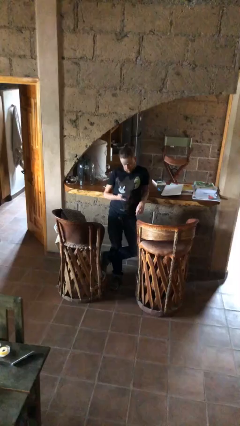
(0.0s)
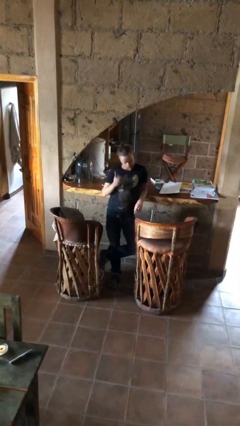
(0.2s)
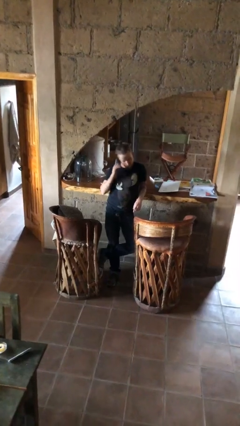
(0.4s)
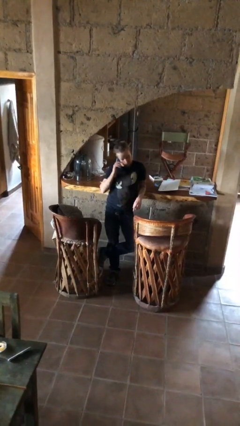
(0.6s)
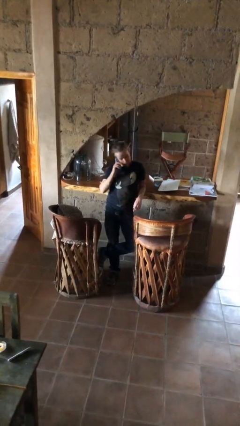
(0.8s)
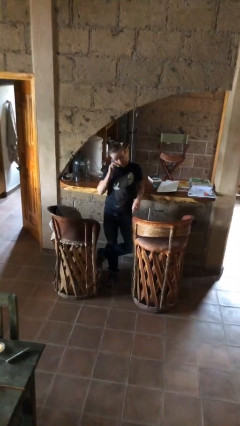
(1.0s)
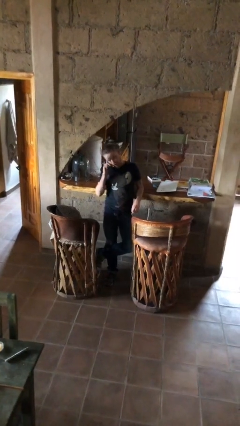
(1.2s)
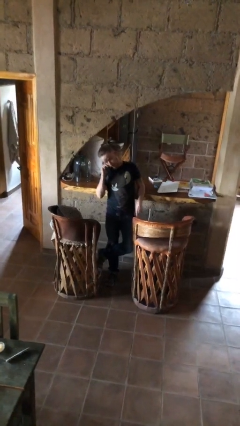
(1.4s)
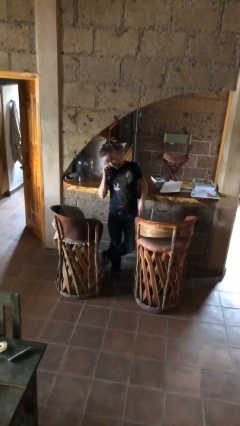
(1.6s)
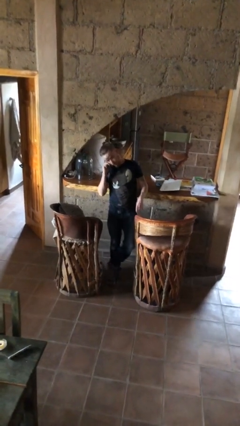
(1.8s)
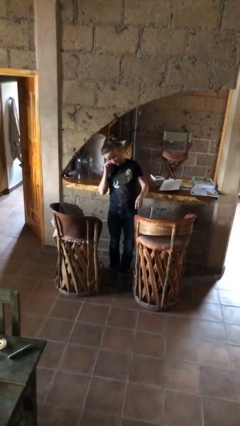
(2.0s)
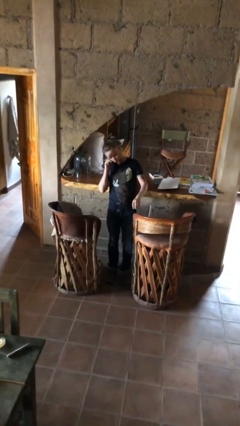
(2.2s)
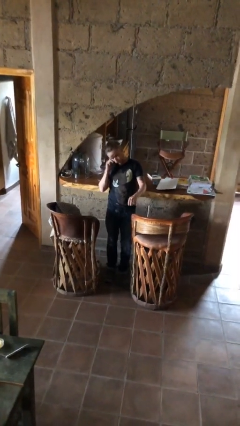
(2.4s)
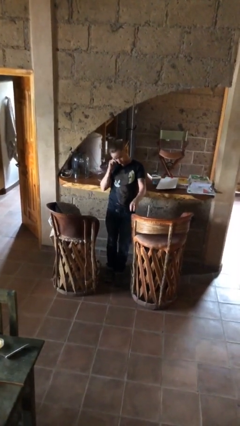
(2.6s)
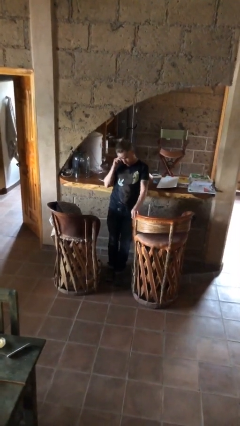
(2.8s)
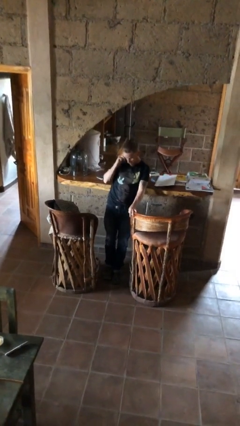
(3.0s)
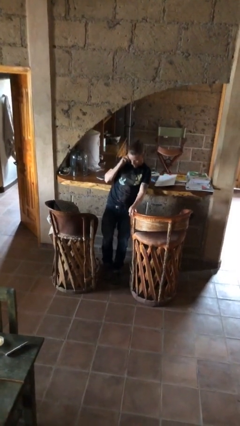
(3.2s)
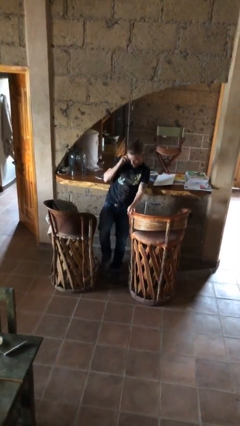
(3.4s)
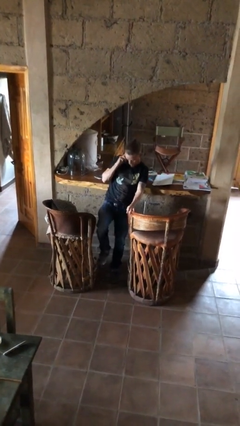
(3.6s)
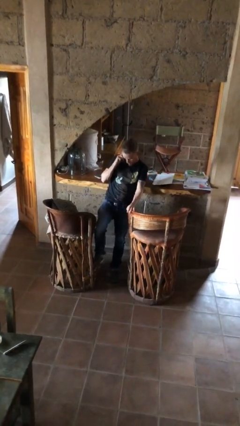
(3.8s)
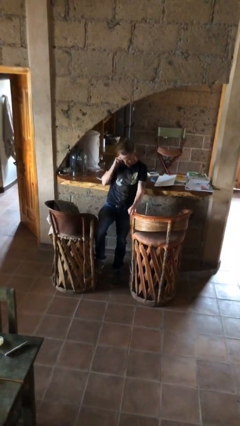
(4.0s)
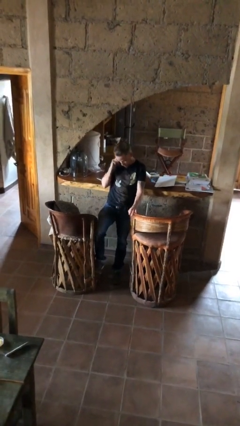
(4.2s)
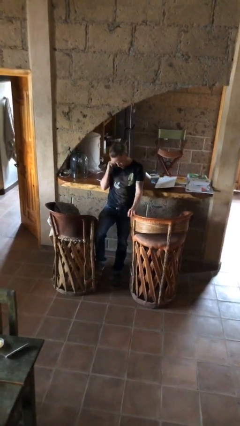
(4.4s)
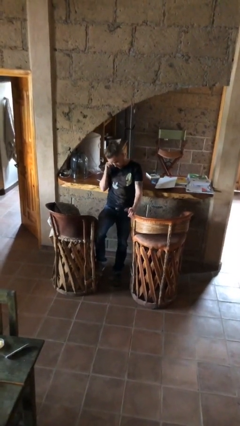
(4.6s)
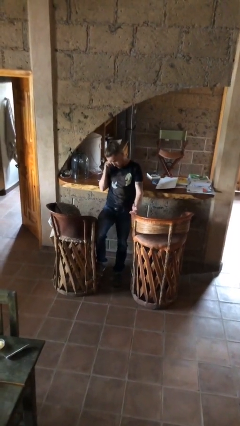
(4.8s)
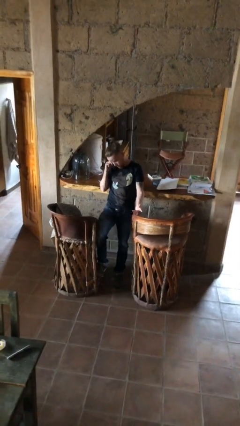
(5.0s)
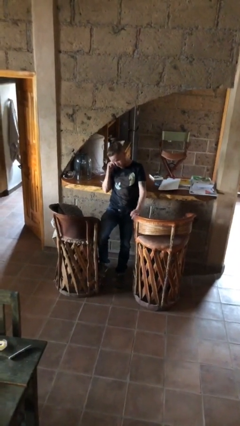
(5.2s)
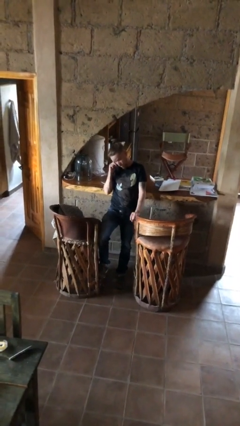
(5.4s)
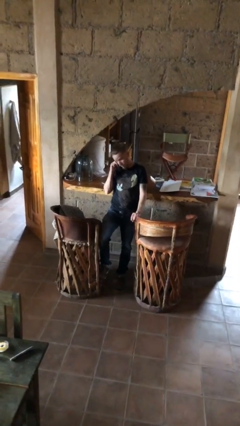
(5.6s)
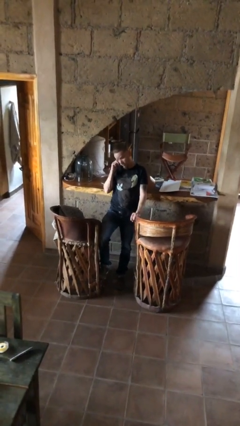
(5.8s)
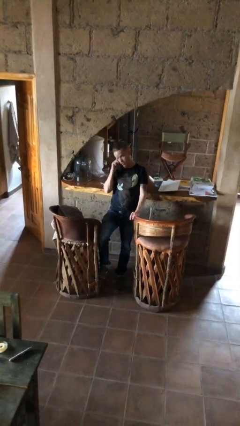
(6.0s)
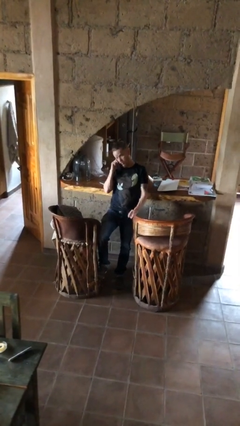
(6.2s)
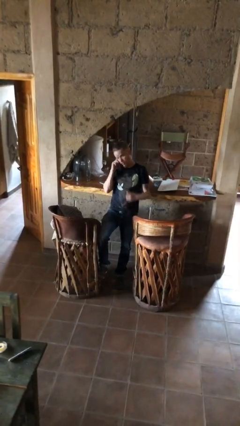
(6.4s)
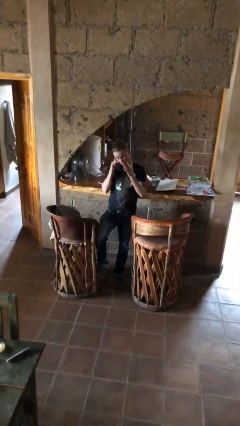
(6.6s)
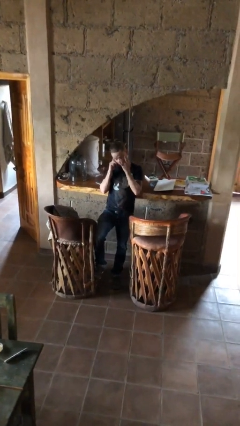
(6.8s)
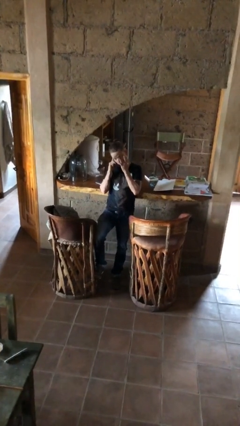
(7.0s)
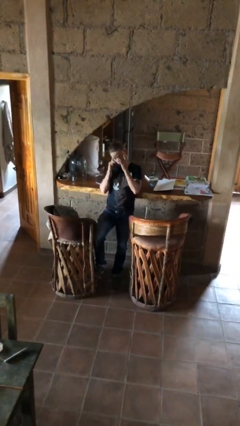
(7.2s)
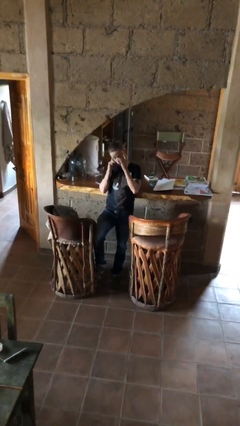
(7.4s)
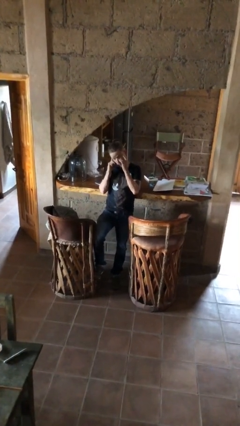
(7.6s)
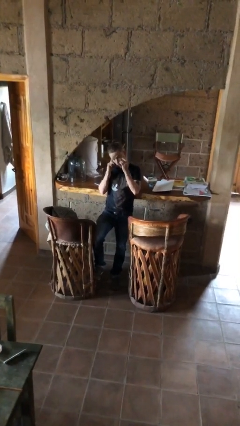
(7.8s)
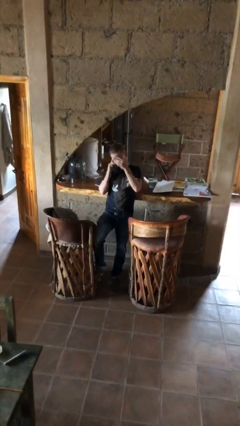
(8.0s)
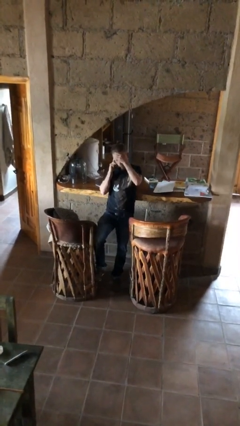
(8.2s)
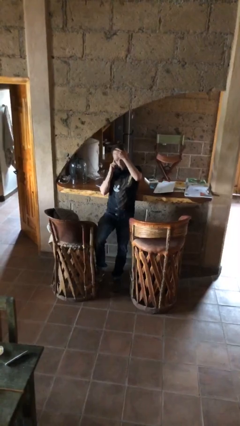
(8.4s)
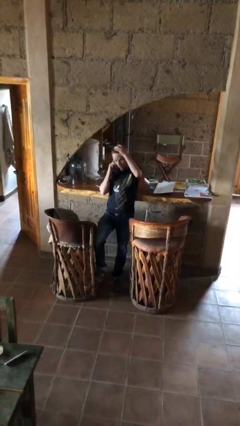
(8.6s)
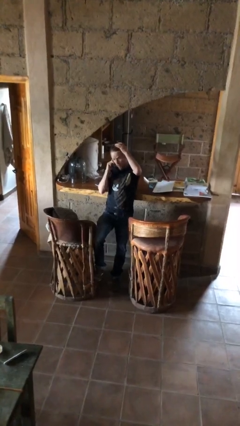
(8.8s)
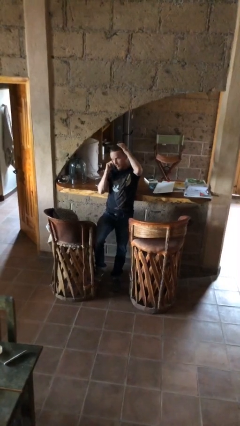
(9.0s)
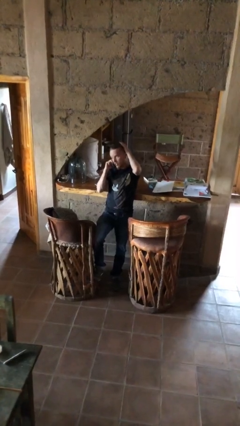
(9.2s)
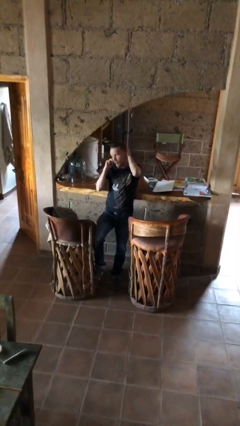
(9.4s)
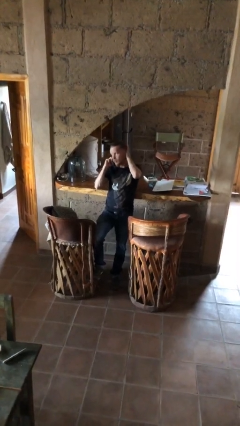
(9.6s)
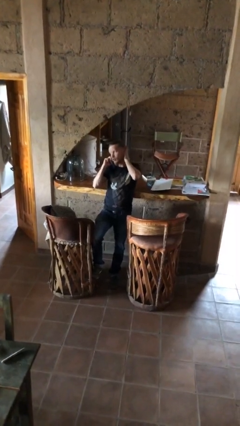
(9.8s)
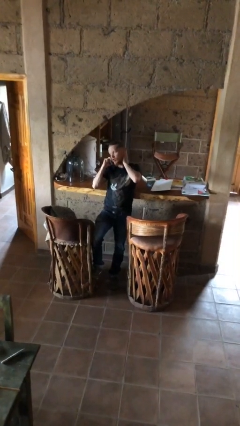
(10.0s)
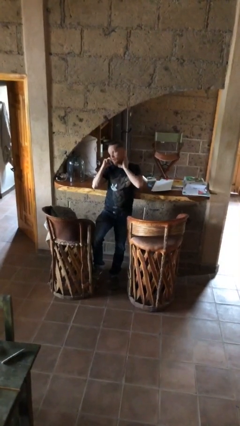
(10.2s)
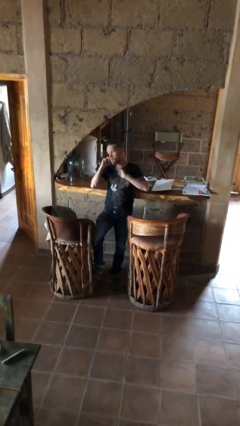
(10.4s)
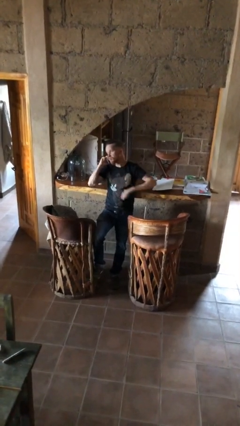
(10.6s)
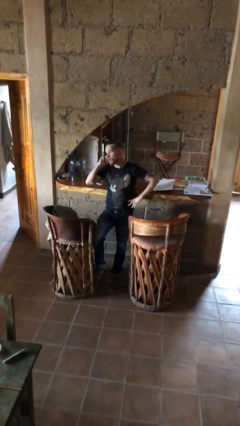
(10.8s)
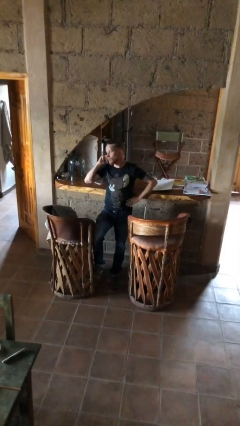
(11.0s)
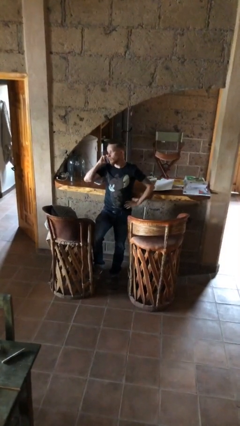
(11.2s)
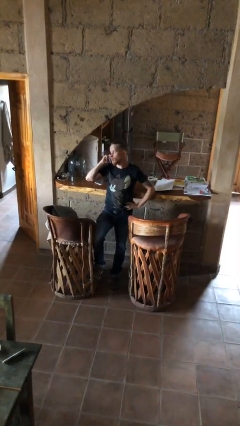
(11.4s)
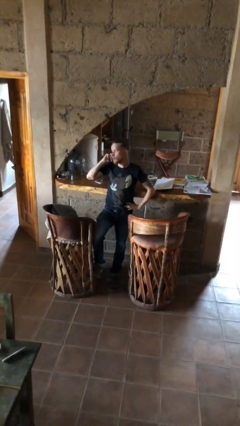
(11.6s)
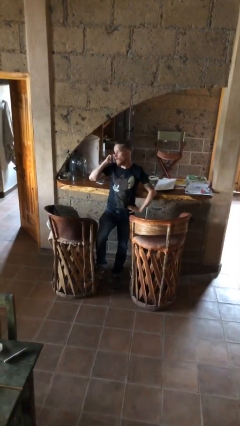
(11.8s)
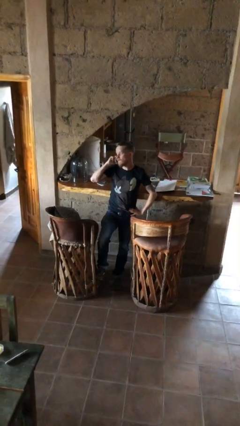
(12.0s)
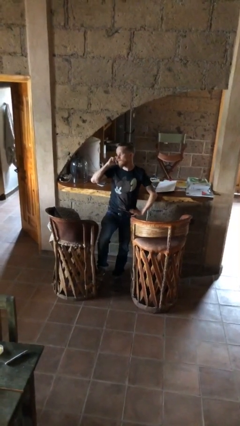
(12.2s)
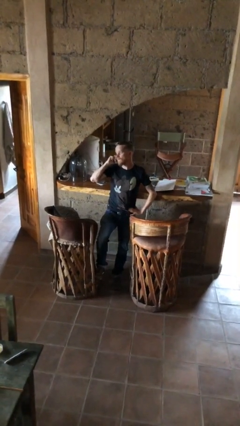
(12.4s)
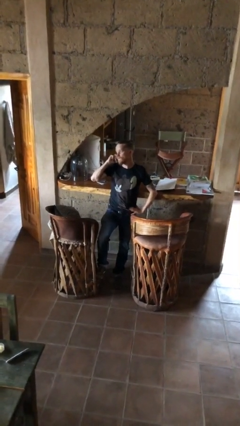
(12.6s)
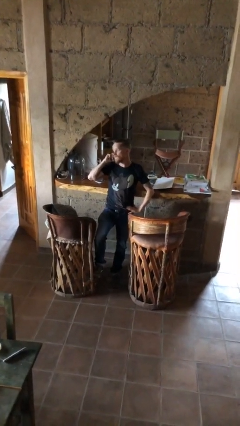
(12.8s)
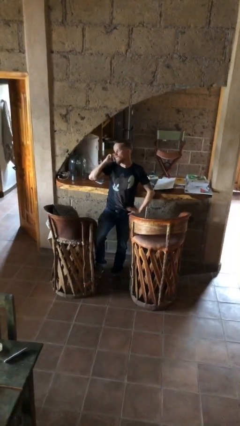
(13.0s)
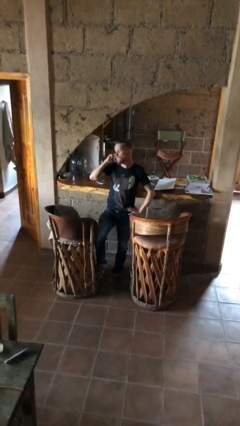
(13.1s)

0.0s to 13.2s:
person talks on phone

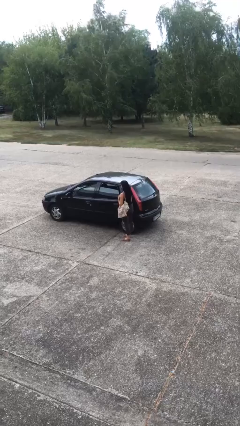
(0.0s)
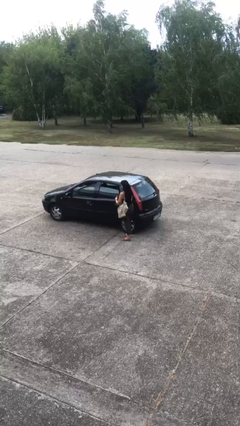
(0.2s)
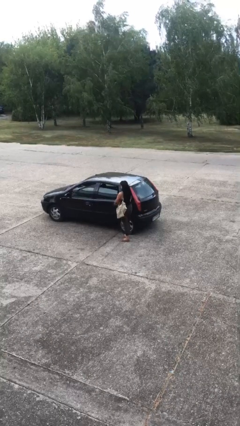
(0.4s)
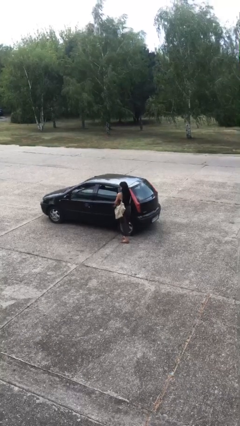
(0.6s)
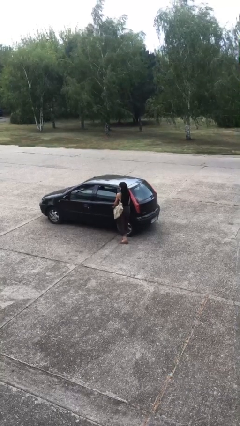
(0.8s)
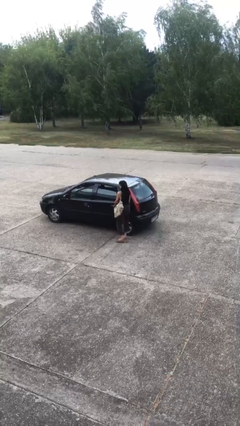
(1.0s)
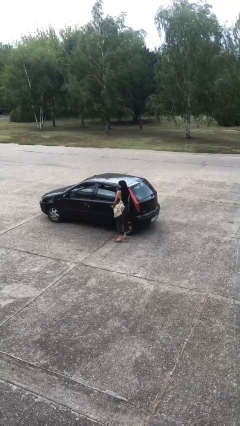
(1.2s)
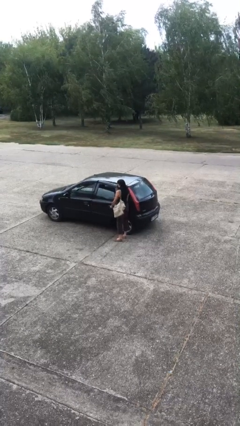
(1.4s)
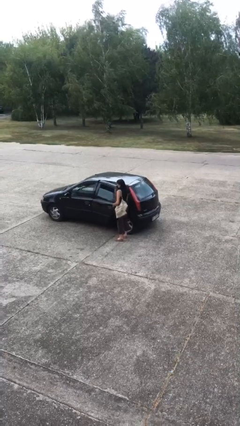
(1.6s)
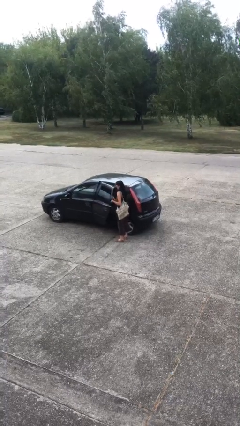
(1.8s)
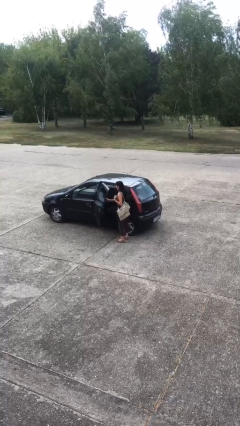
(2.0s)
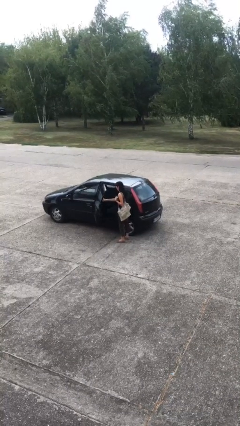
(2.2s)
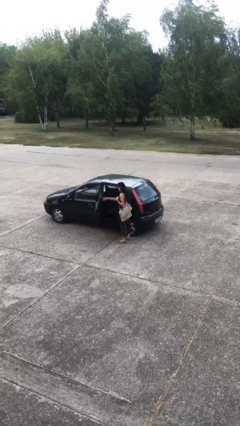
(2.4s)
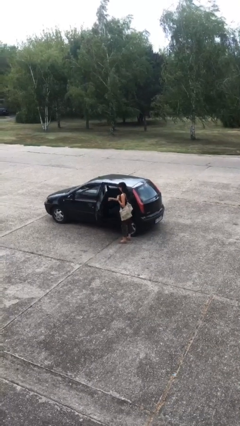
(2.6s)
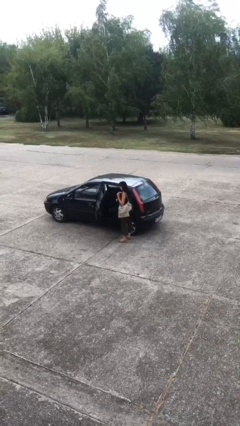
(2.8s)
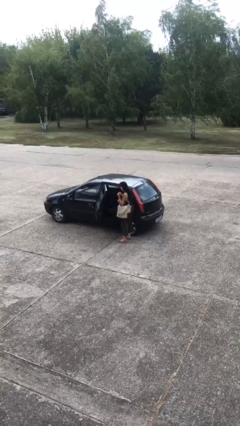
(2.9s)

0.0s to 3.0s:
person opens car door

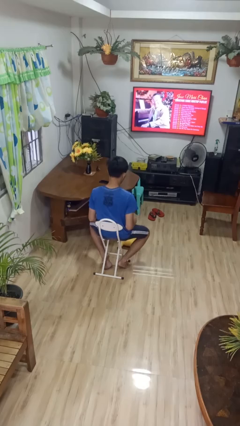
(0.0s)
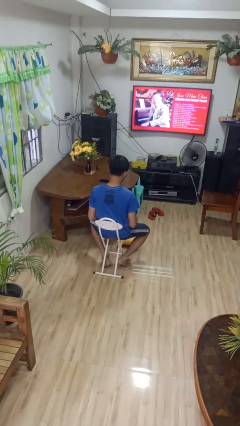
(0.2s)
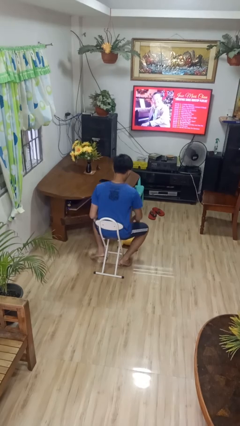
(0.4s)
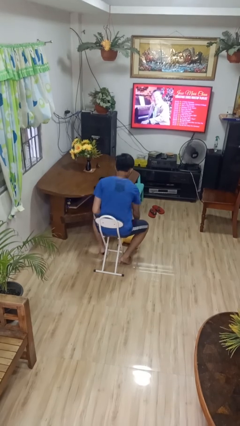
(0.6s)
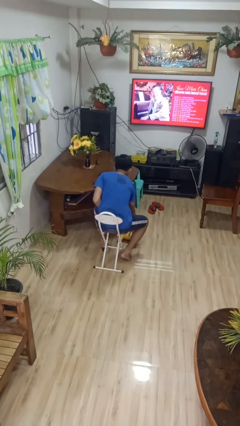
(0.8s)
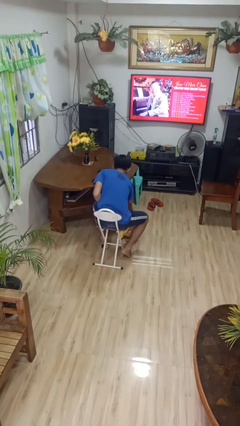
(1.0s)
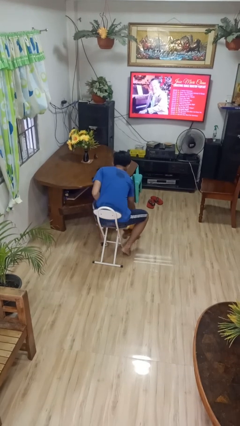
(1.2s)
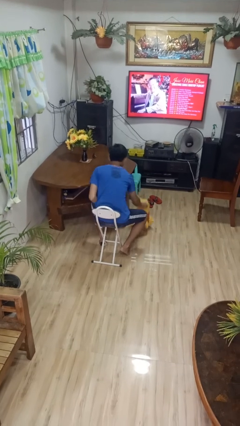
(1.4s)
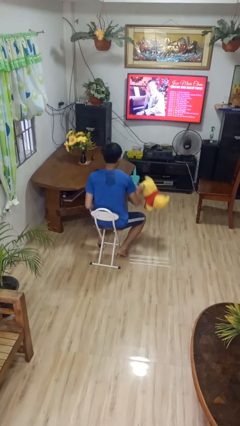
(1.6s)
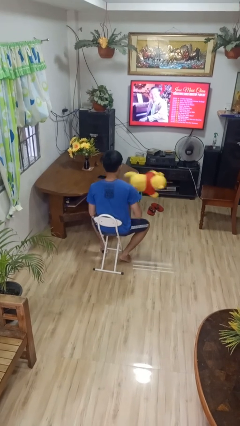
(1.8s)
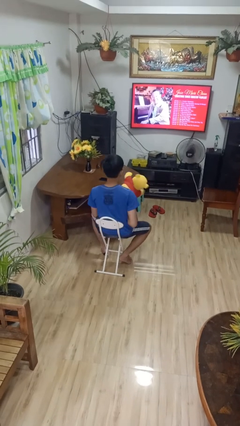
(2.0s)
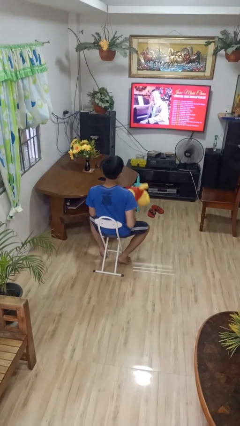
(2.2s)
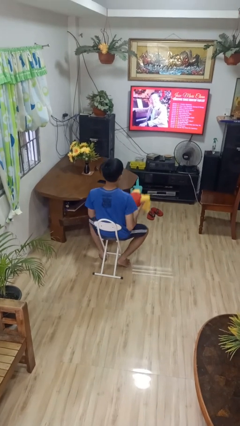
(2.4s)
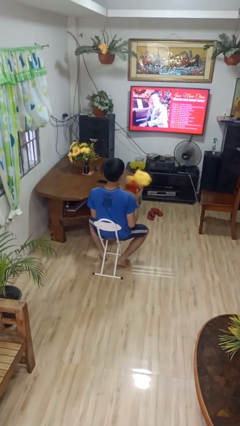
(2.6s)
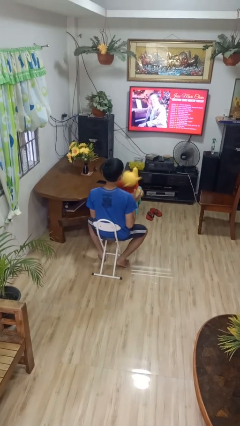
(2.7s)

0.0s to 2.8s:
person picks up object from floor
